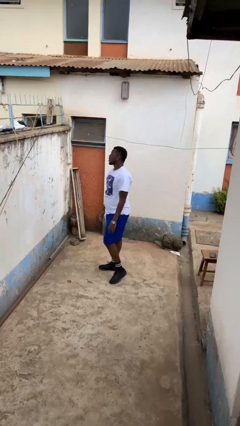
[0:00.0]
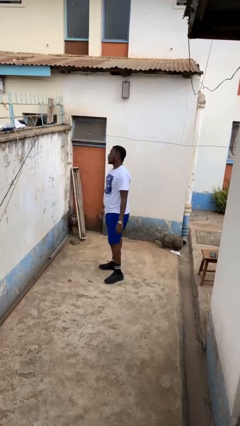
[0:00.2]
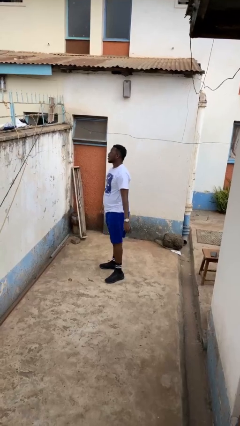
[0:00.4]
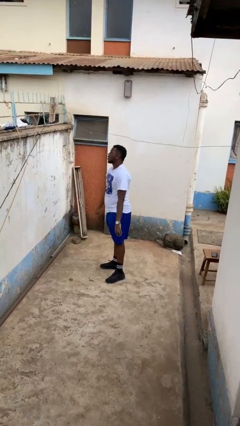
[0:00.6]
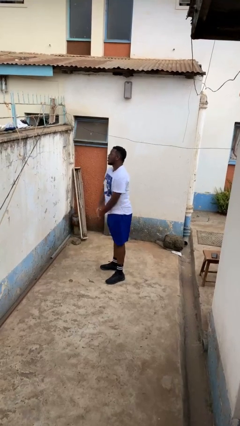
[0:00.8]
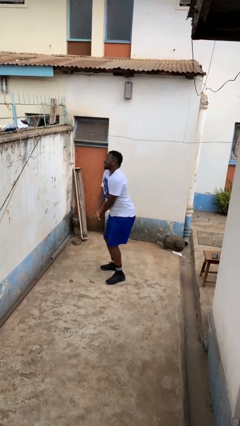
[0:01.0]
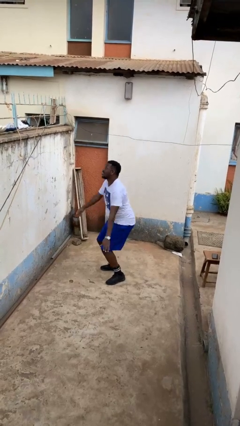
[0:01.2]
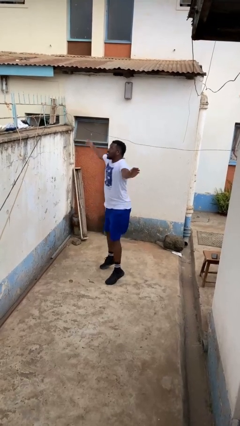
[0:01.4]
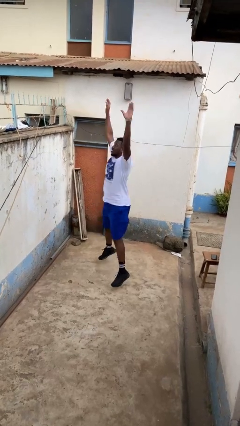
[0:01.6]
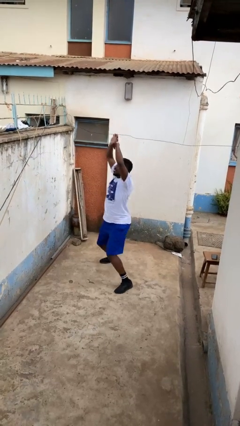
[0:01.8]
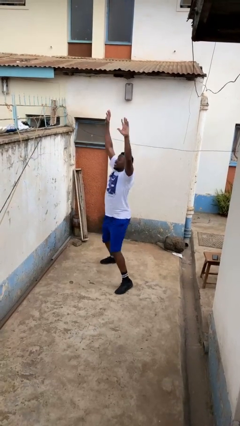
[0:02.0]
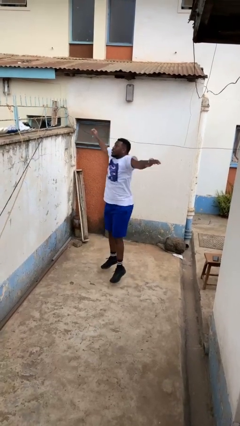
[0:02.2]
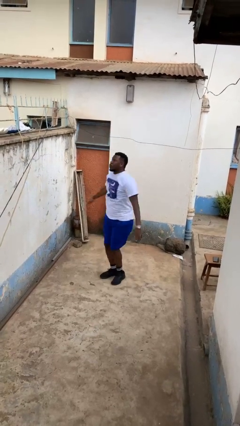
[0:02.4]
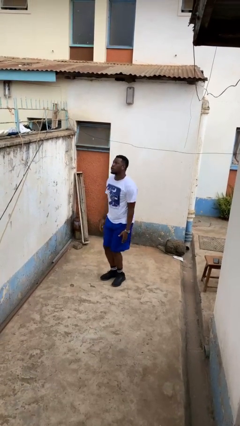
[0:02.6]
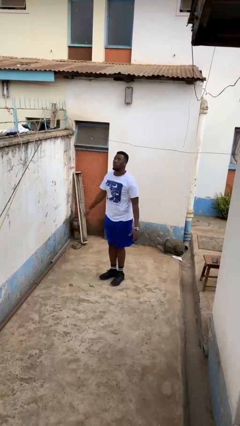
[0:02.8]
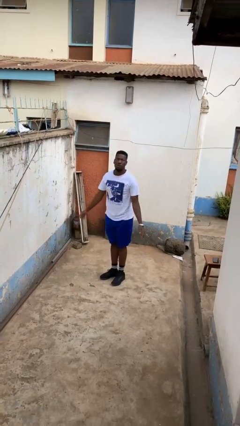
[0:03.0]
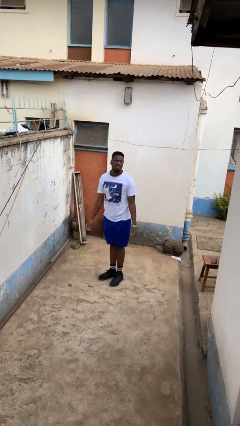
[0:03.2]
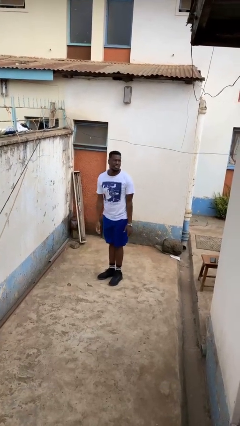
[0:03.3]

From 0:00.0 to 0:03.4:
person exercises with jumping jacks

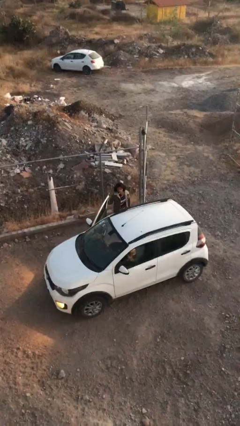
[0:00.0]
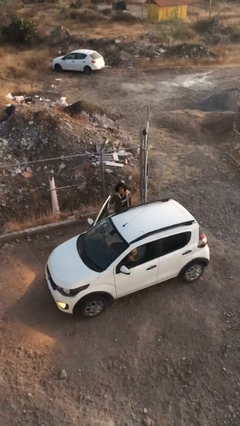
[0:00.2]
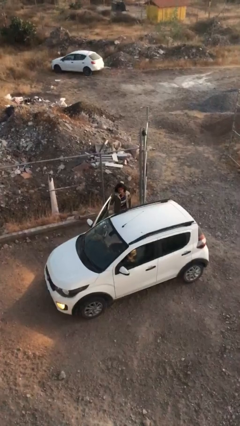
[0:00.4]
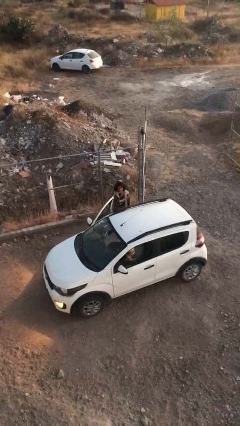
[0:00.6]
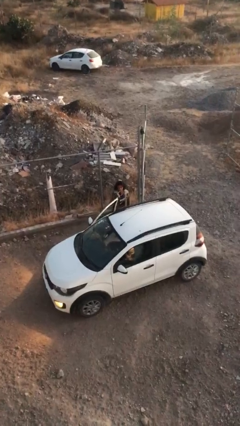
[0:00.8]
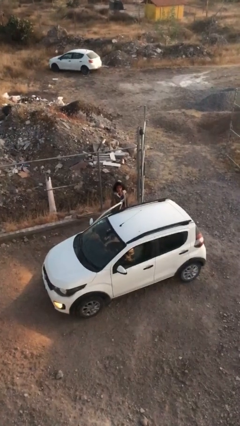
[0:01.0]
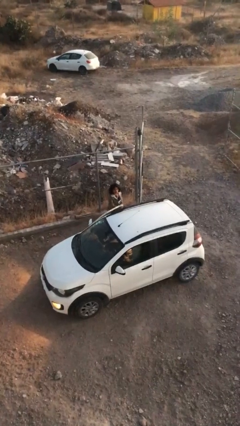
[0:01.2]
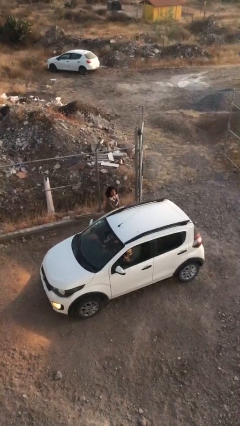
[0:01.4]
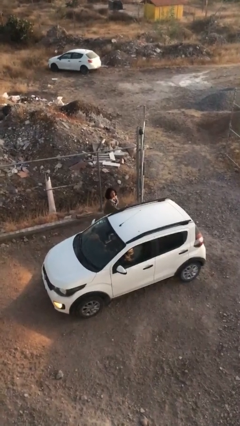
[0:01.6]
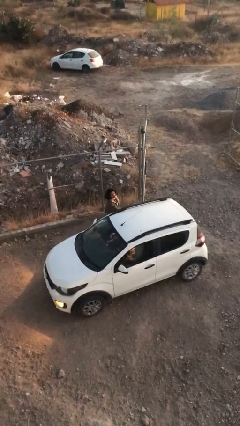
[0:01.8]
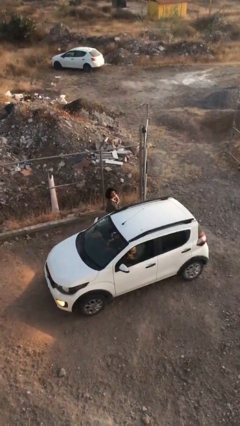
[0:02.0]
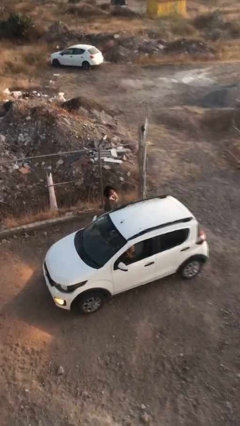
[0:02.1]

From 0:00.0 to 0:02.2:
person closes car door

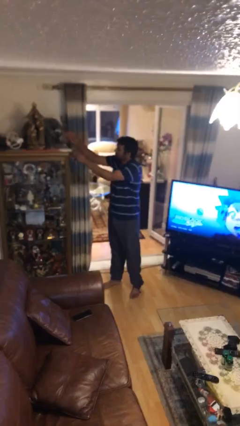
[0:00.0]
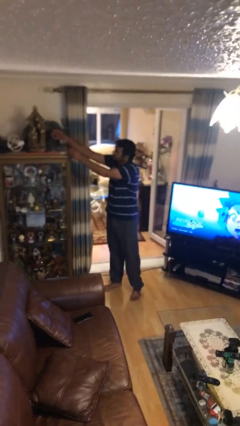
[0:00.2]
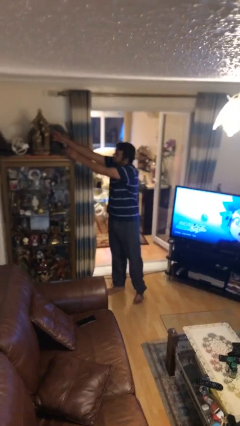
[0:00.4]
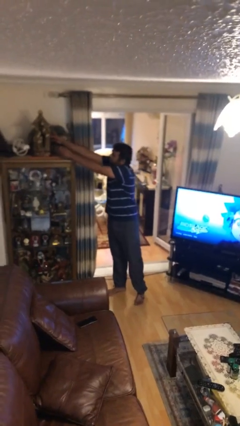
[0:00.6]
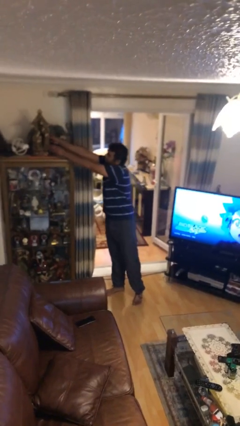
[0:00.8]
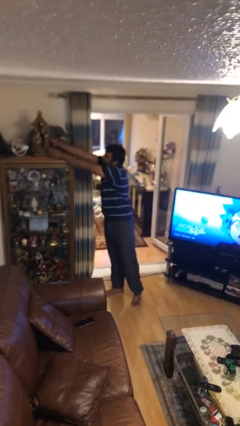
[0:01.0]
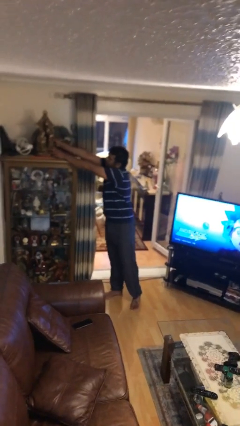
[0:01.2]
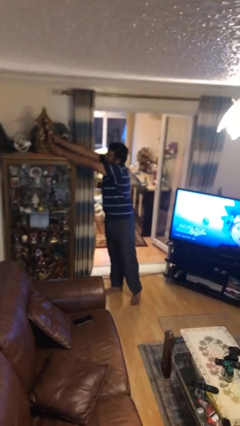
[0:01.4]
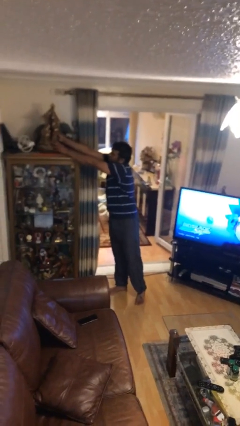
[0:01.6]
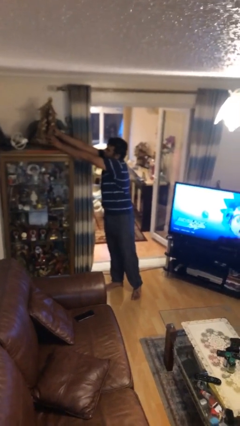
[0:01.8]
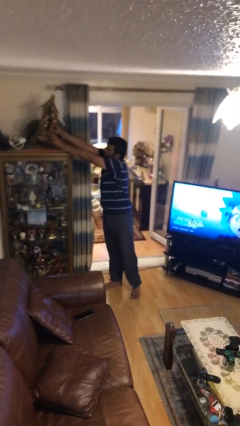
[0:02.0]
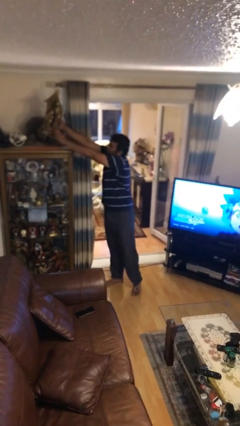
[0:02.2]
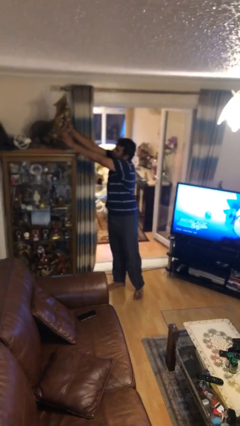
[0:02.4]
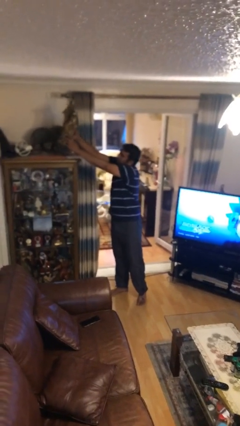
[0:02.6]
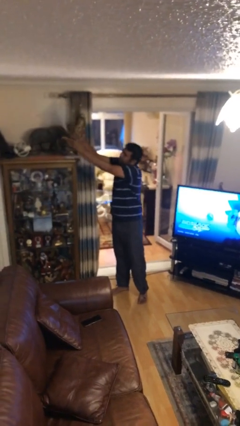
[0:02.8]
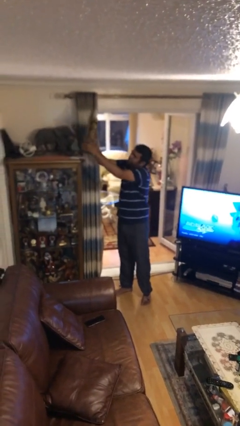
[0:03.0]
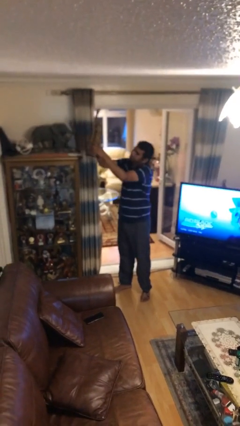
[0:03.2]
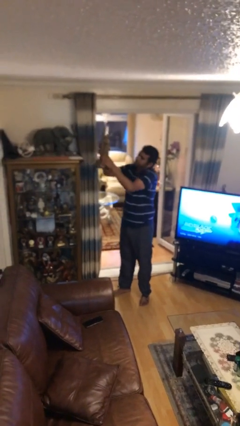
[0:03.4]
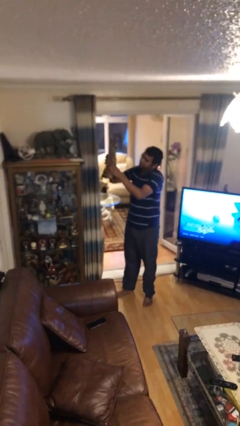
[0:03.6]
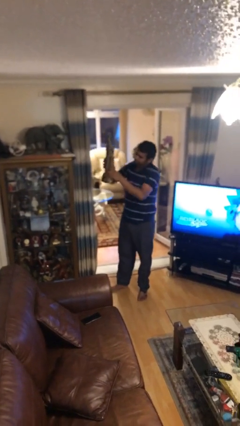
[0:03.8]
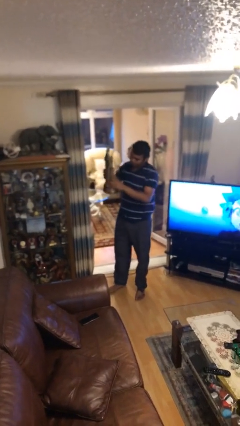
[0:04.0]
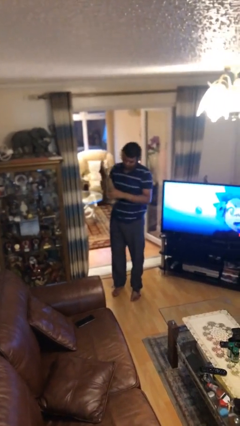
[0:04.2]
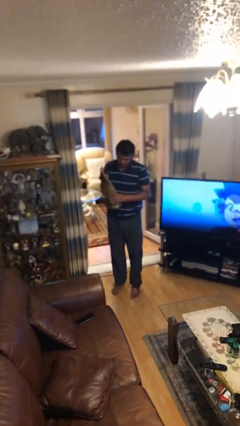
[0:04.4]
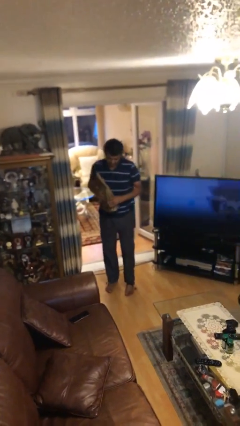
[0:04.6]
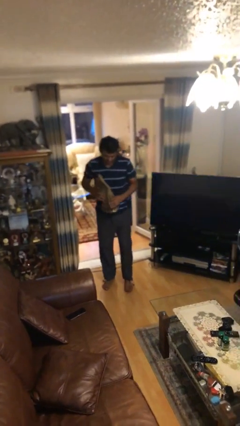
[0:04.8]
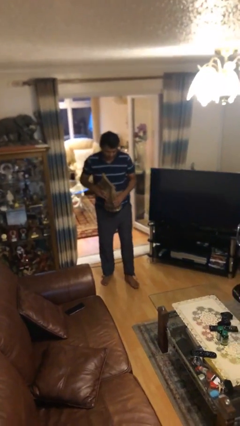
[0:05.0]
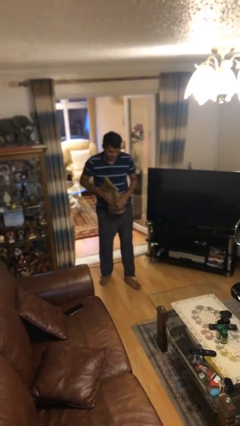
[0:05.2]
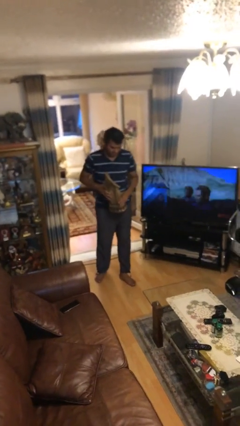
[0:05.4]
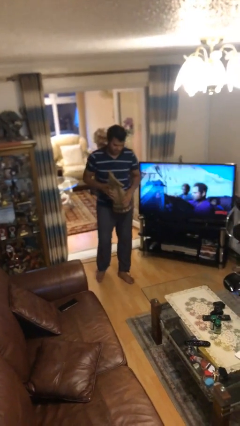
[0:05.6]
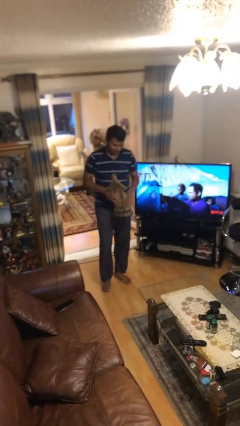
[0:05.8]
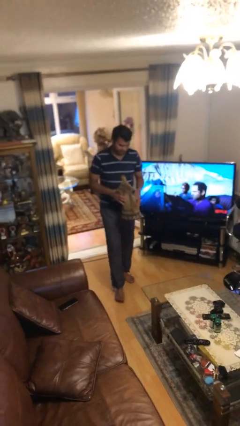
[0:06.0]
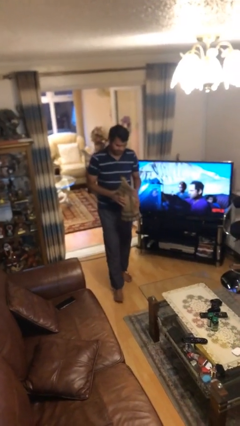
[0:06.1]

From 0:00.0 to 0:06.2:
person picks up object from shelf

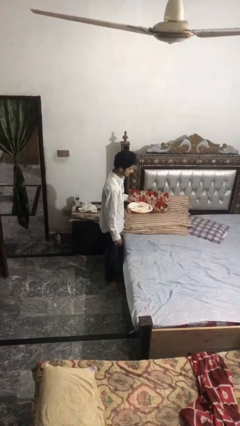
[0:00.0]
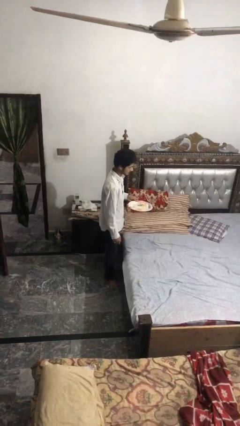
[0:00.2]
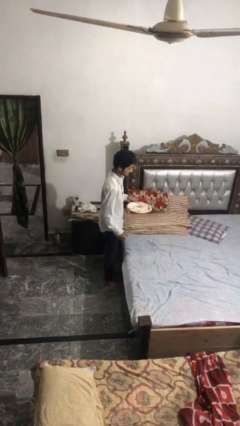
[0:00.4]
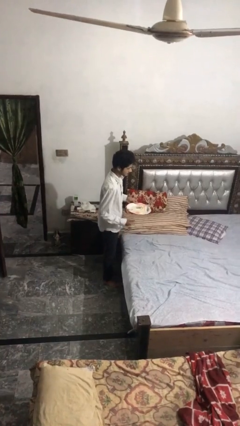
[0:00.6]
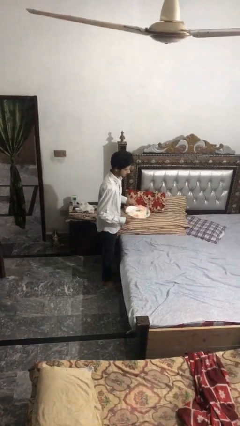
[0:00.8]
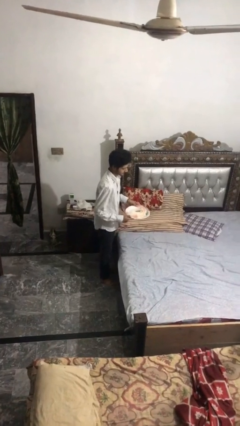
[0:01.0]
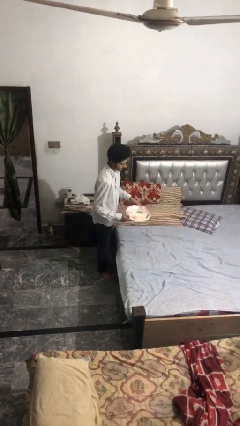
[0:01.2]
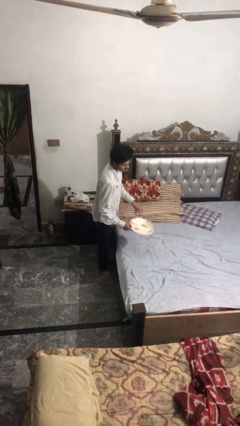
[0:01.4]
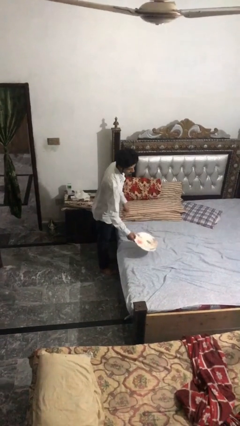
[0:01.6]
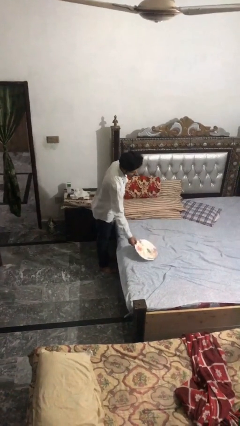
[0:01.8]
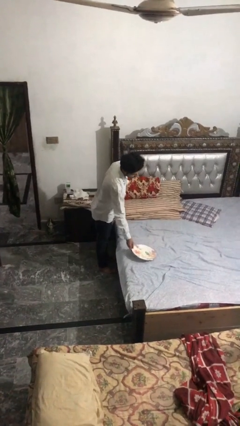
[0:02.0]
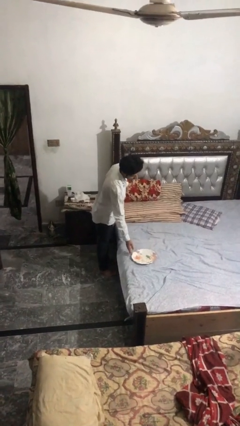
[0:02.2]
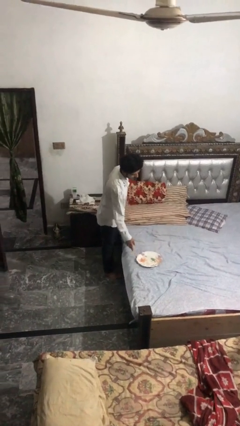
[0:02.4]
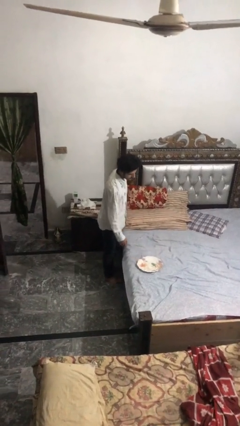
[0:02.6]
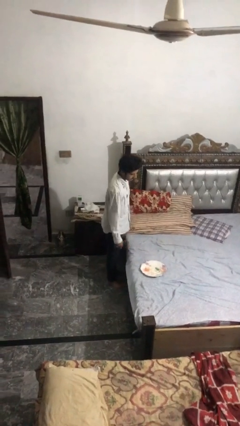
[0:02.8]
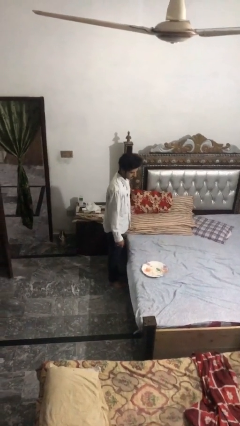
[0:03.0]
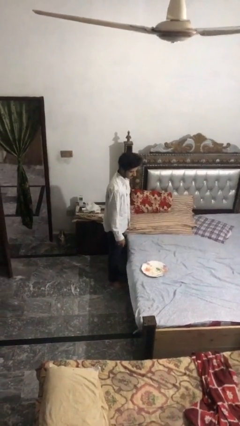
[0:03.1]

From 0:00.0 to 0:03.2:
person puts down object on bed

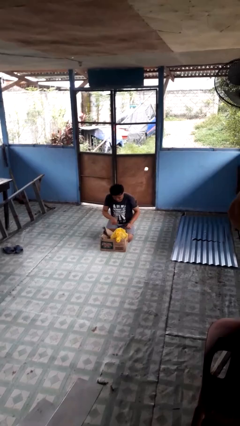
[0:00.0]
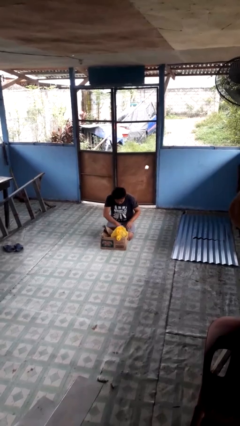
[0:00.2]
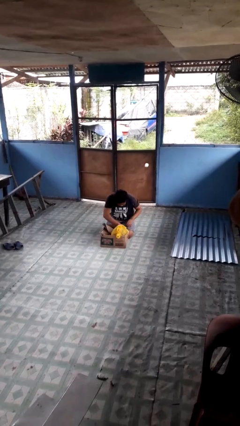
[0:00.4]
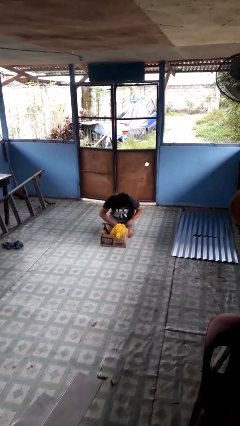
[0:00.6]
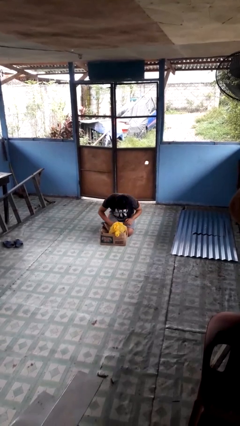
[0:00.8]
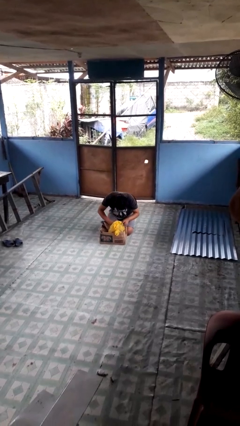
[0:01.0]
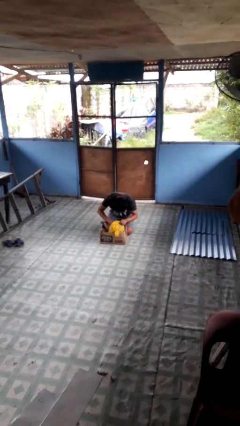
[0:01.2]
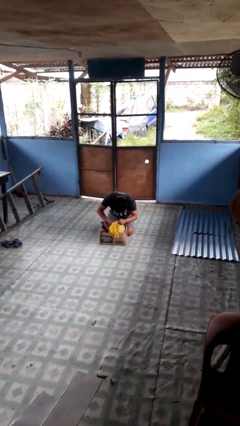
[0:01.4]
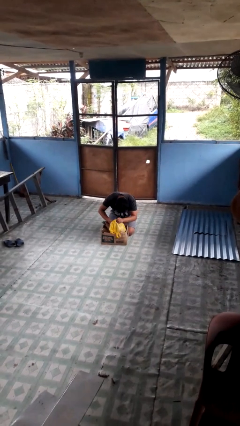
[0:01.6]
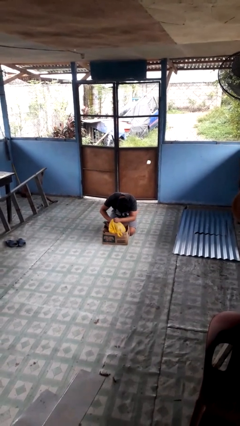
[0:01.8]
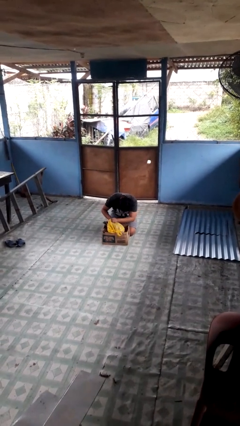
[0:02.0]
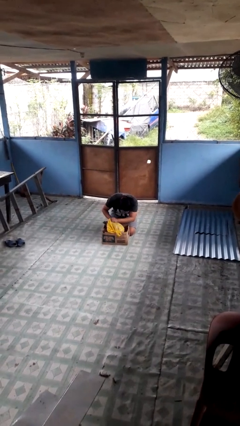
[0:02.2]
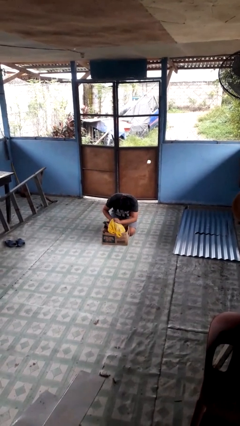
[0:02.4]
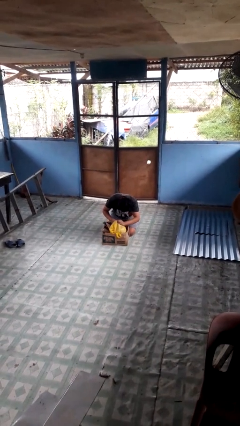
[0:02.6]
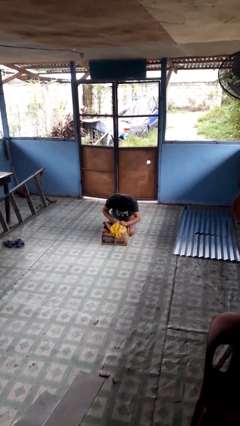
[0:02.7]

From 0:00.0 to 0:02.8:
person searches in box
